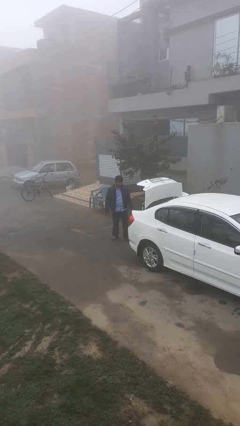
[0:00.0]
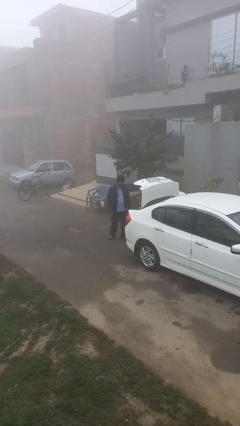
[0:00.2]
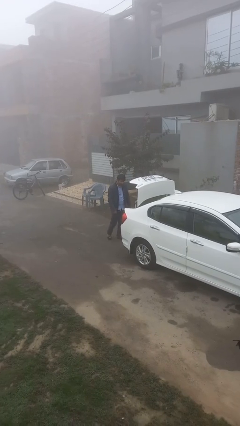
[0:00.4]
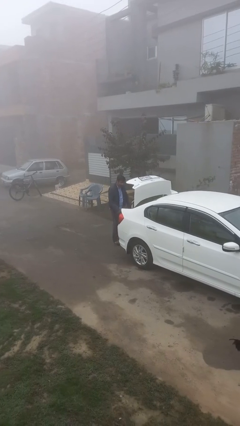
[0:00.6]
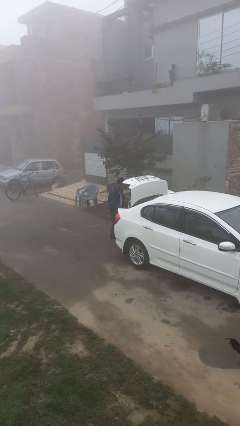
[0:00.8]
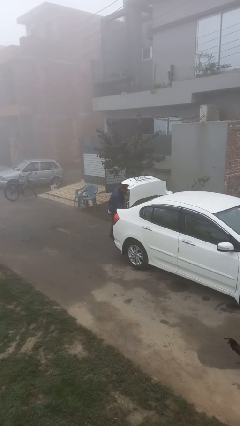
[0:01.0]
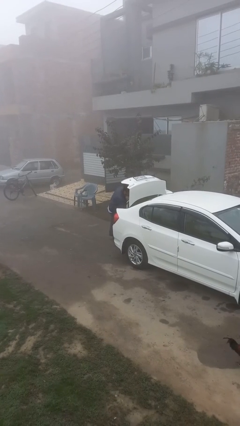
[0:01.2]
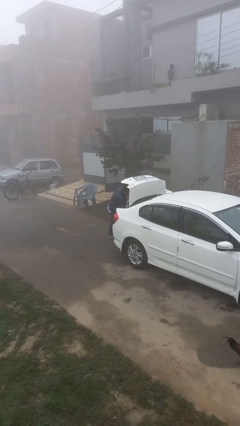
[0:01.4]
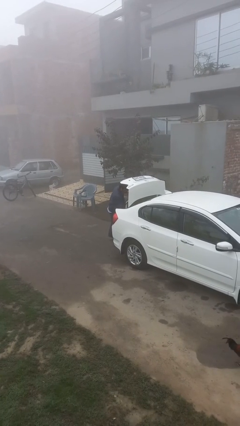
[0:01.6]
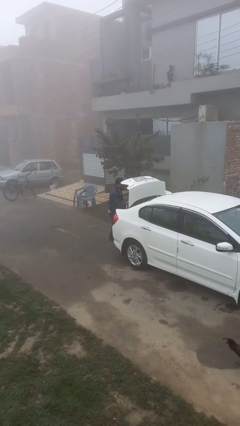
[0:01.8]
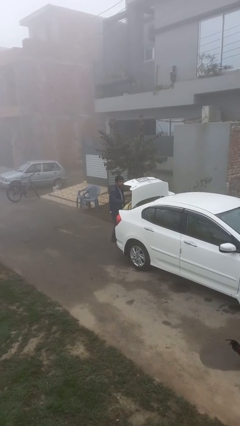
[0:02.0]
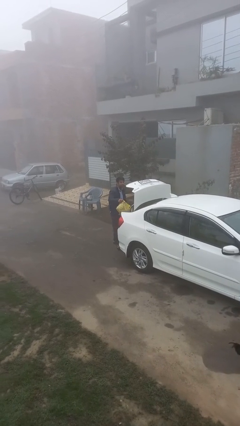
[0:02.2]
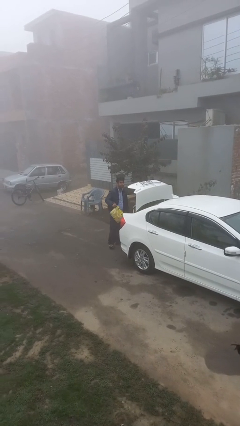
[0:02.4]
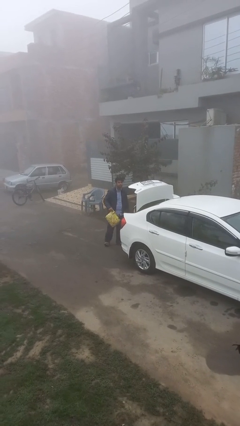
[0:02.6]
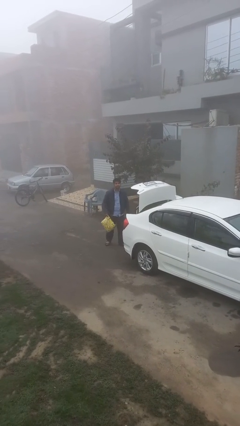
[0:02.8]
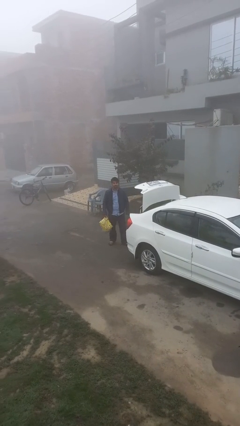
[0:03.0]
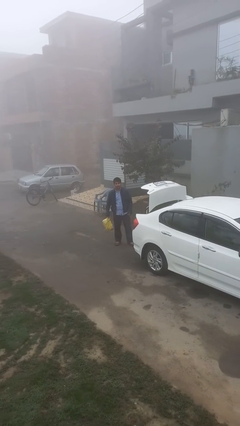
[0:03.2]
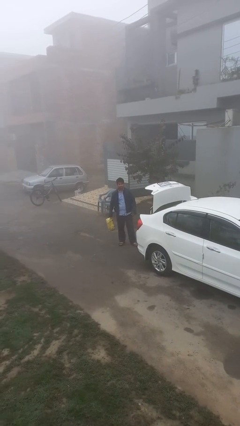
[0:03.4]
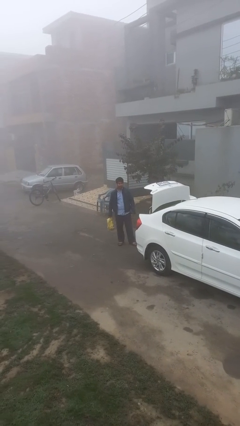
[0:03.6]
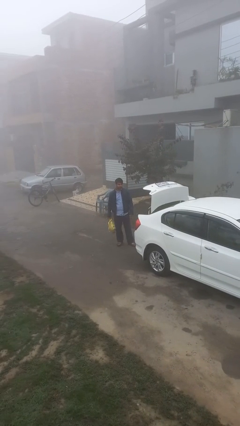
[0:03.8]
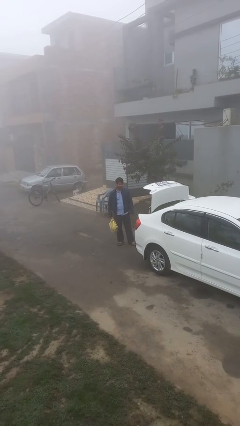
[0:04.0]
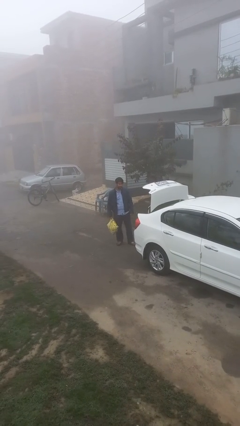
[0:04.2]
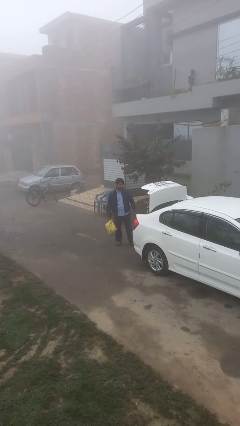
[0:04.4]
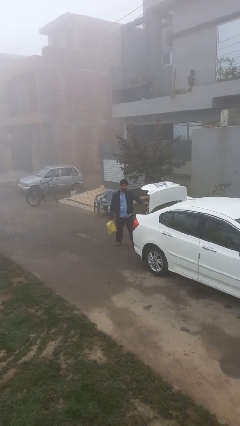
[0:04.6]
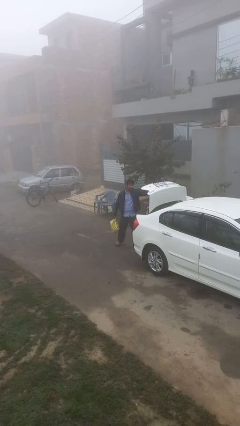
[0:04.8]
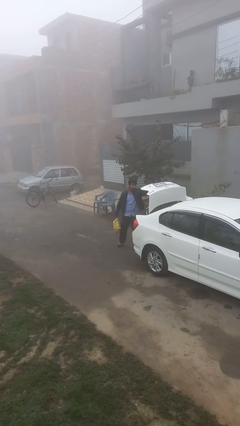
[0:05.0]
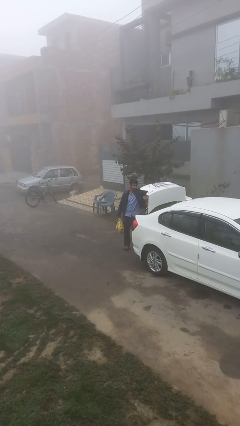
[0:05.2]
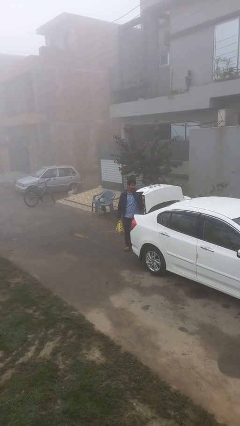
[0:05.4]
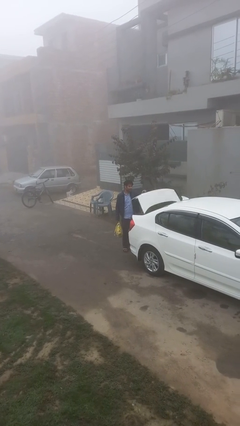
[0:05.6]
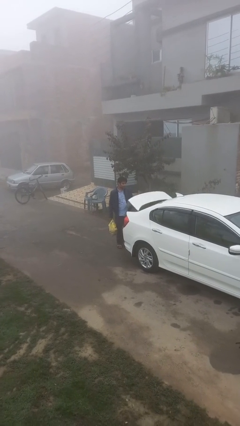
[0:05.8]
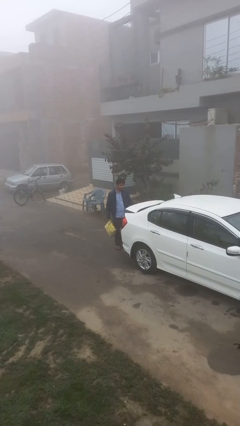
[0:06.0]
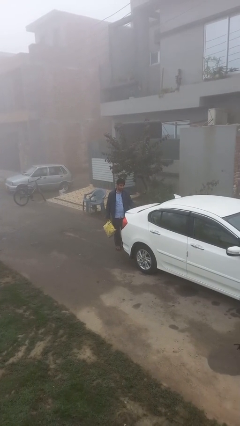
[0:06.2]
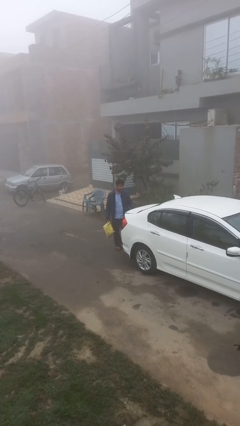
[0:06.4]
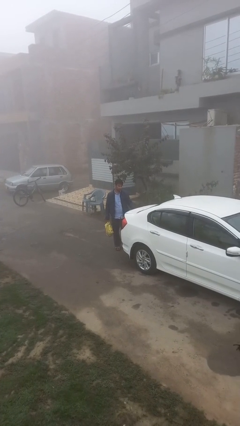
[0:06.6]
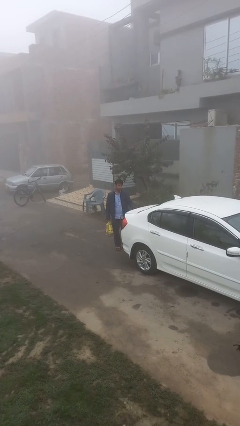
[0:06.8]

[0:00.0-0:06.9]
person unloads car

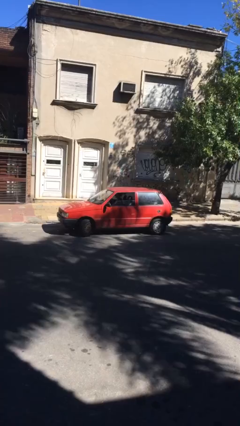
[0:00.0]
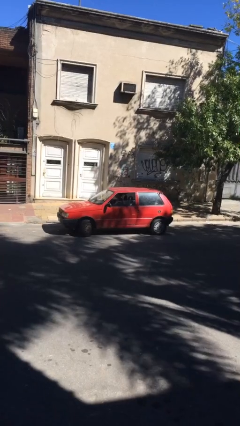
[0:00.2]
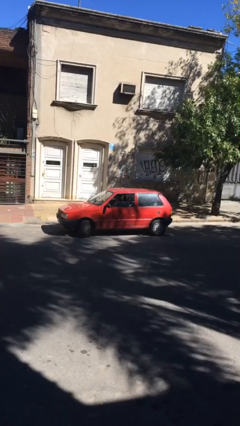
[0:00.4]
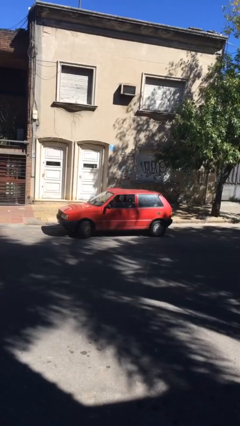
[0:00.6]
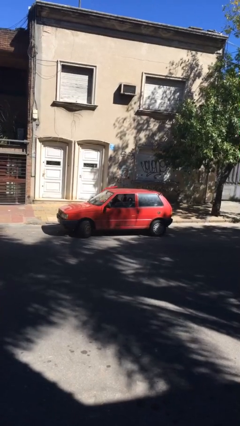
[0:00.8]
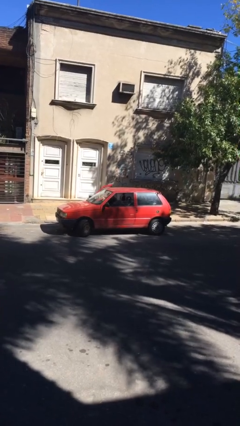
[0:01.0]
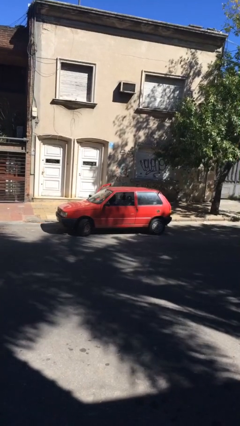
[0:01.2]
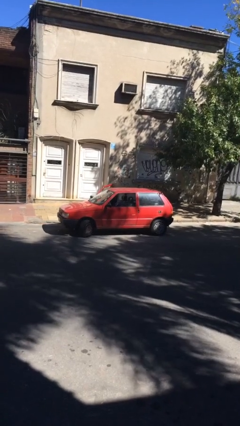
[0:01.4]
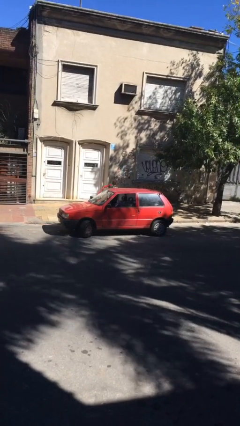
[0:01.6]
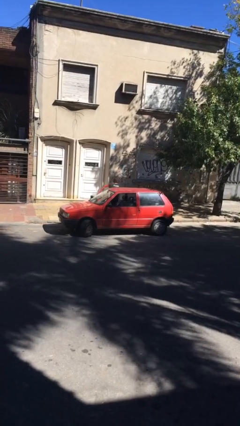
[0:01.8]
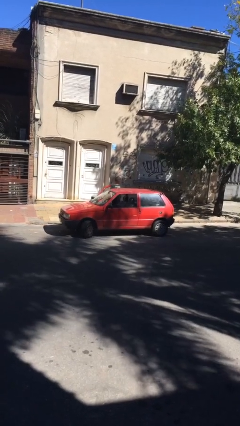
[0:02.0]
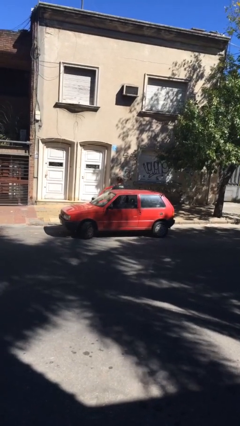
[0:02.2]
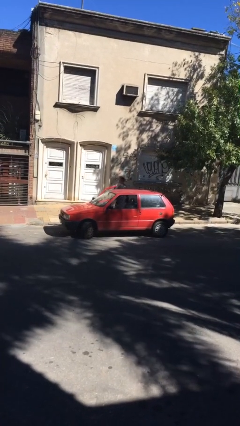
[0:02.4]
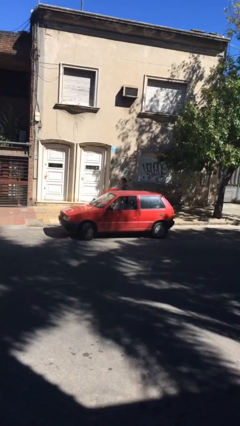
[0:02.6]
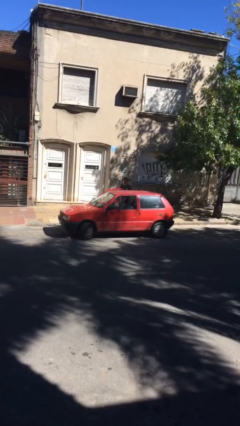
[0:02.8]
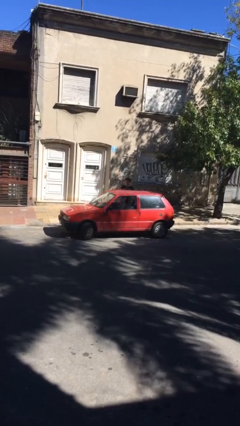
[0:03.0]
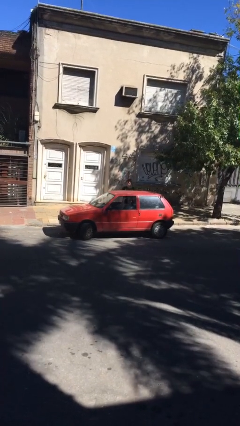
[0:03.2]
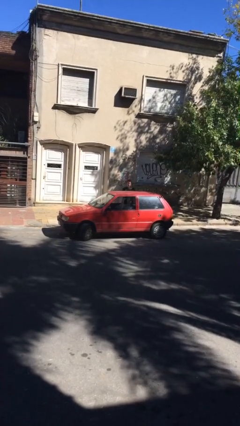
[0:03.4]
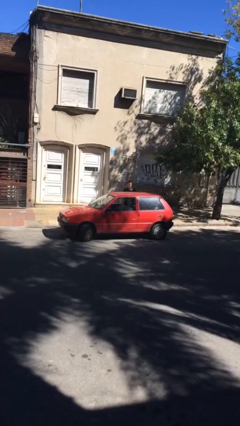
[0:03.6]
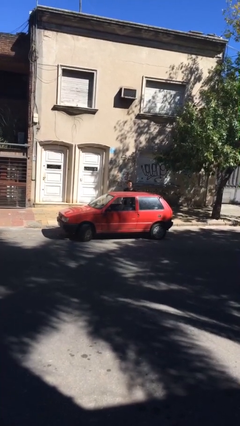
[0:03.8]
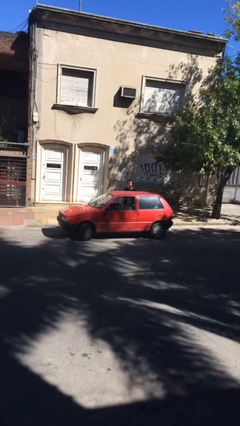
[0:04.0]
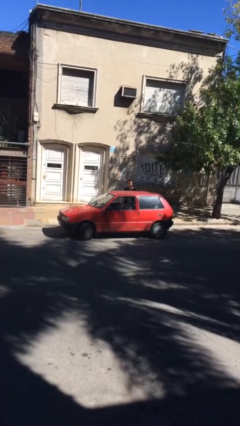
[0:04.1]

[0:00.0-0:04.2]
car drops off person

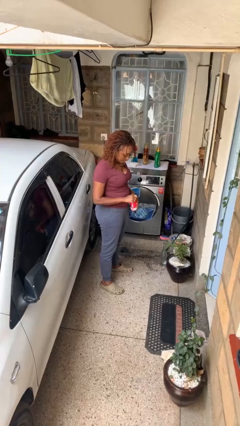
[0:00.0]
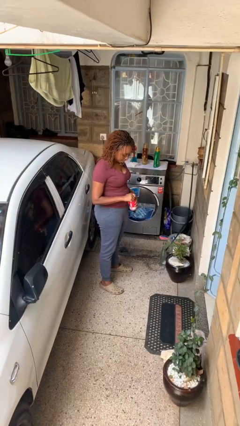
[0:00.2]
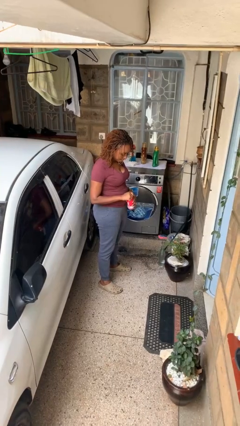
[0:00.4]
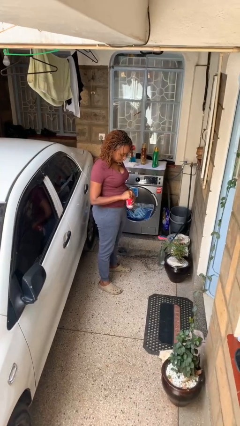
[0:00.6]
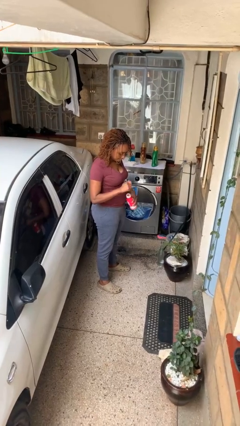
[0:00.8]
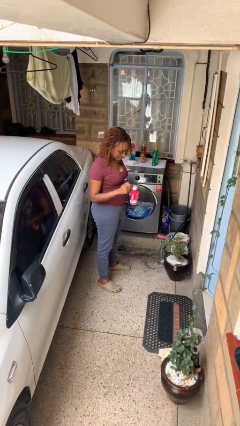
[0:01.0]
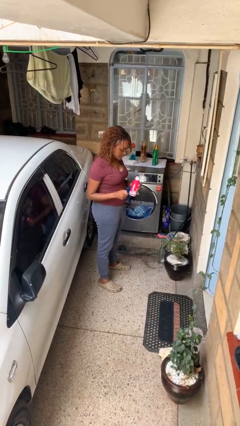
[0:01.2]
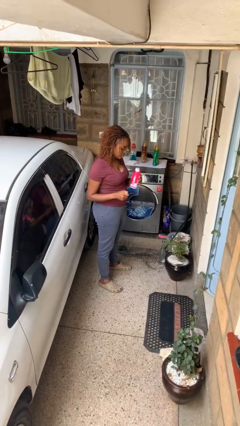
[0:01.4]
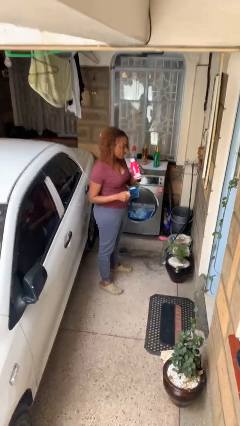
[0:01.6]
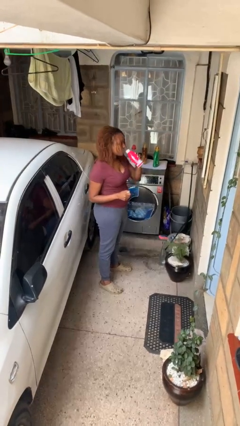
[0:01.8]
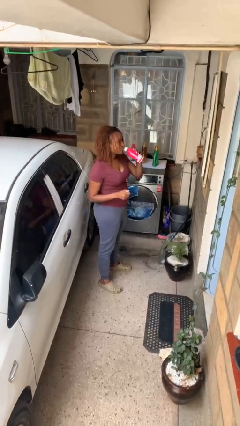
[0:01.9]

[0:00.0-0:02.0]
person opens beverage can

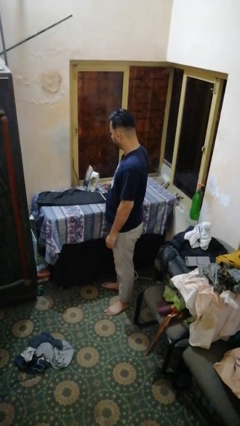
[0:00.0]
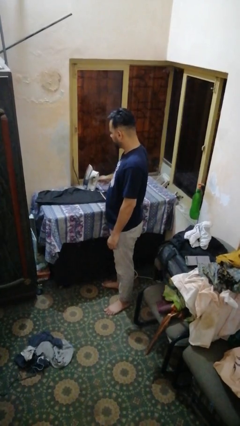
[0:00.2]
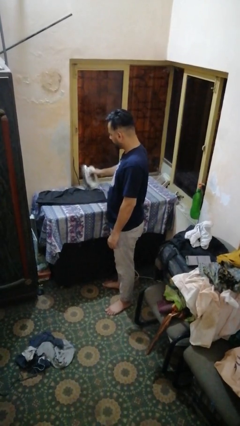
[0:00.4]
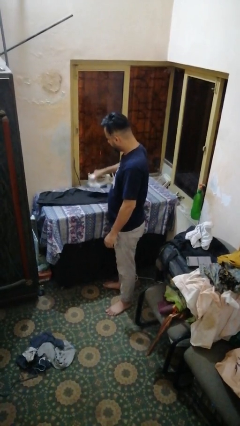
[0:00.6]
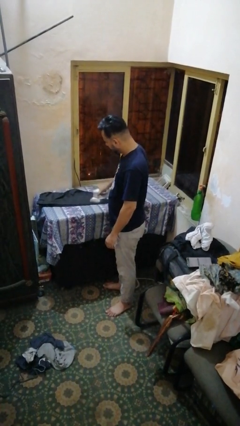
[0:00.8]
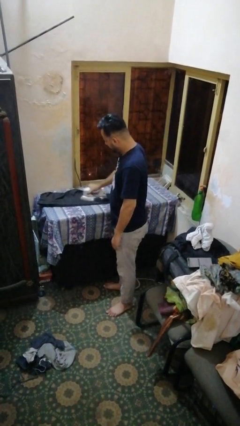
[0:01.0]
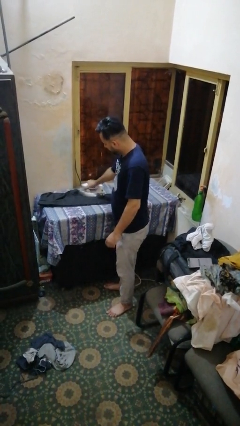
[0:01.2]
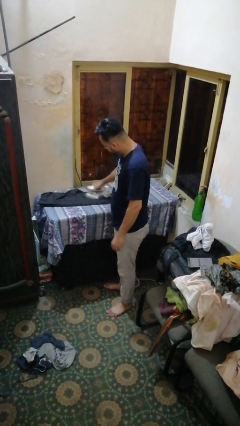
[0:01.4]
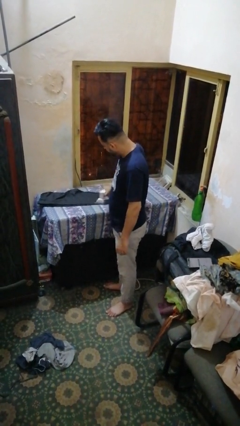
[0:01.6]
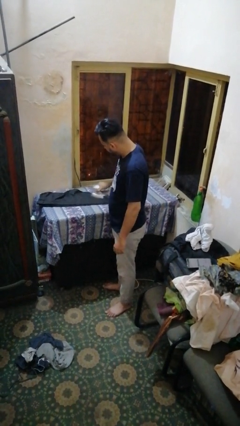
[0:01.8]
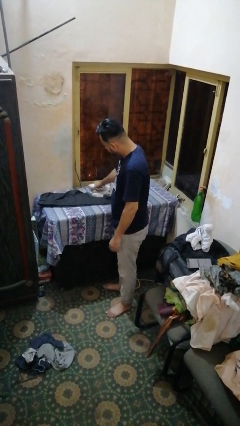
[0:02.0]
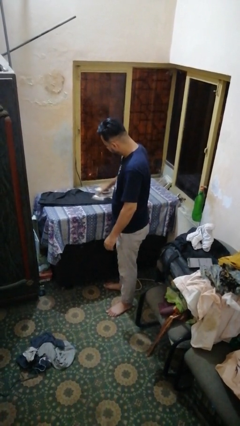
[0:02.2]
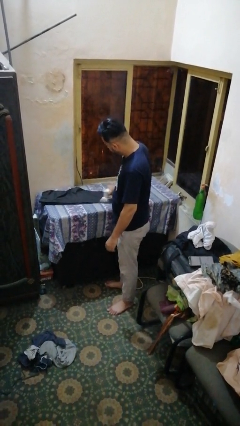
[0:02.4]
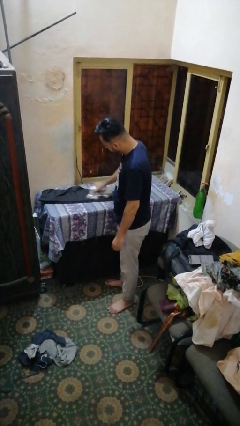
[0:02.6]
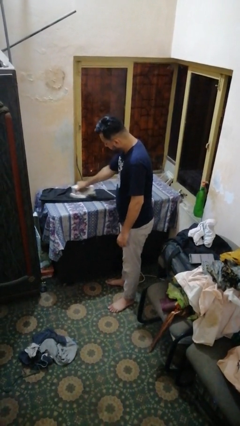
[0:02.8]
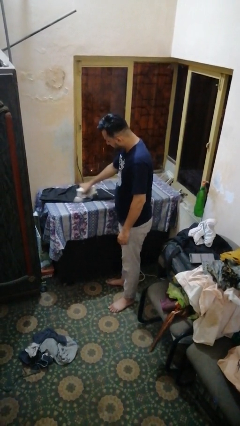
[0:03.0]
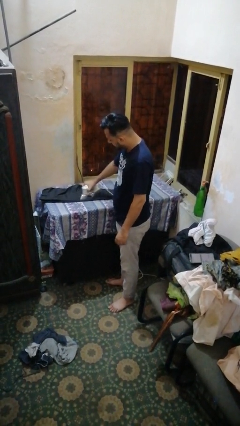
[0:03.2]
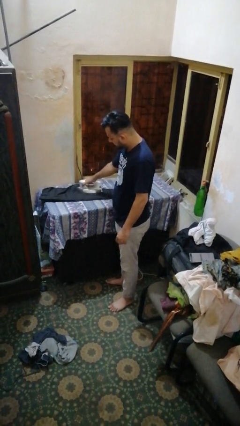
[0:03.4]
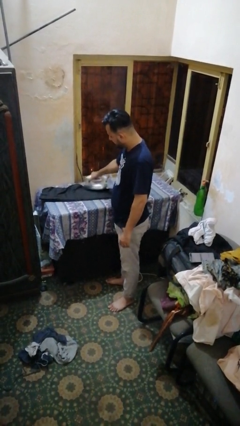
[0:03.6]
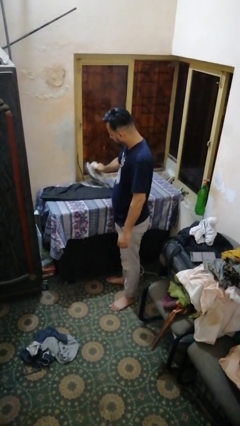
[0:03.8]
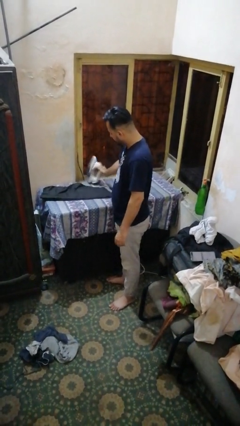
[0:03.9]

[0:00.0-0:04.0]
person irons clothes

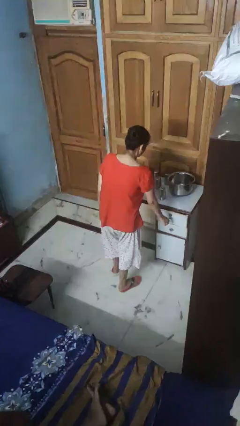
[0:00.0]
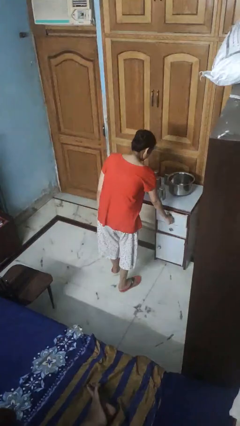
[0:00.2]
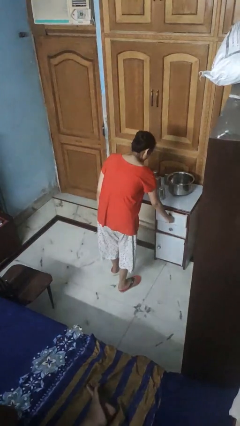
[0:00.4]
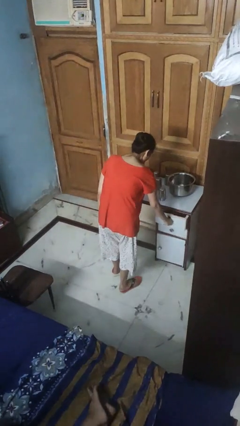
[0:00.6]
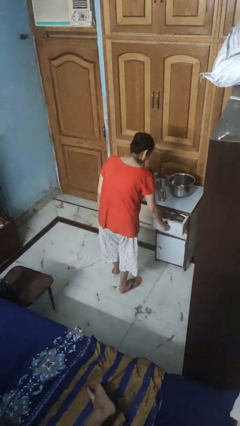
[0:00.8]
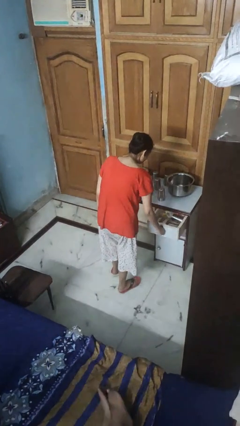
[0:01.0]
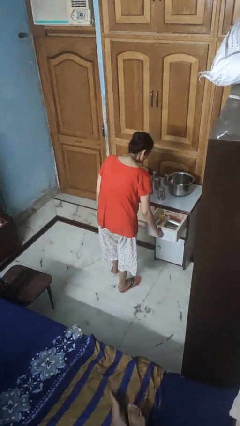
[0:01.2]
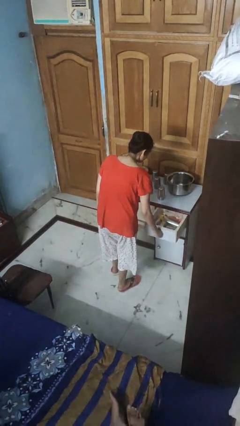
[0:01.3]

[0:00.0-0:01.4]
person opens kitchen drawer
